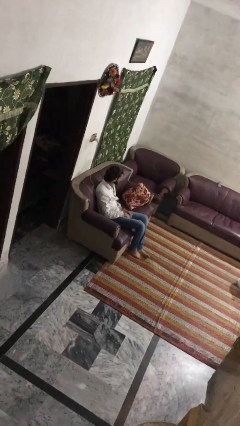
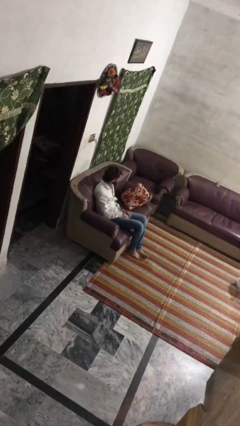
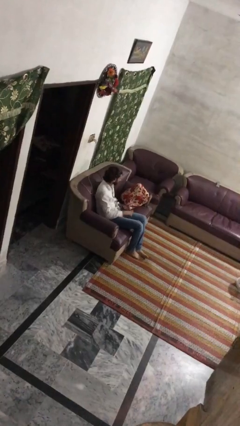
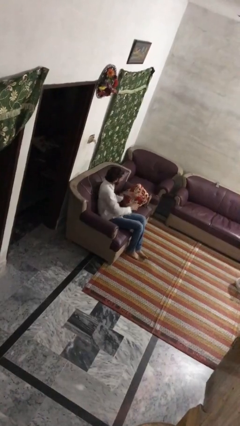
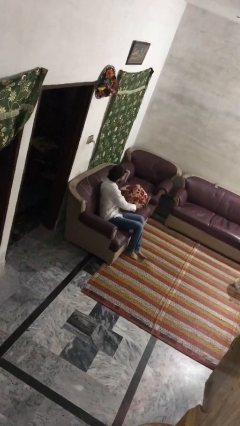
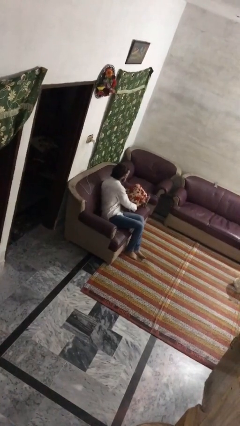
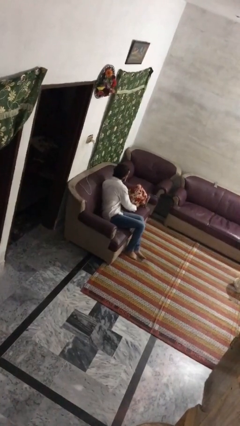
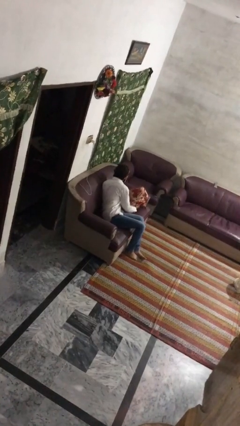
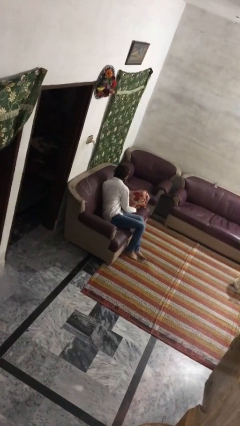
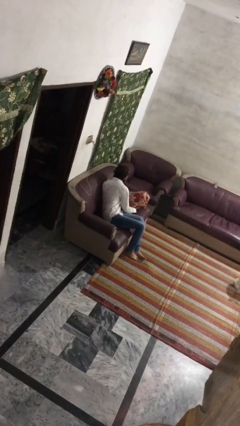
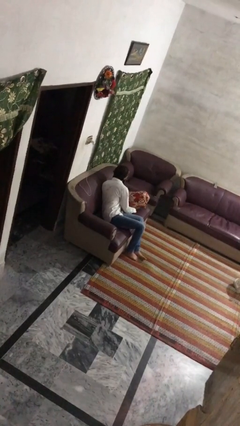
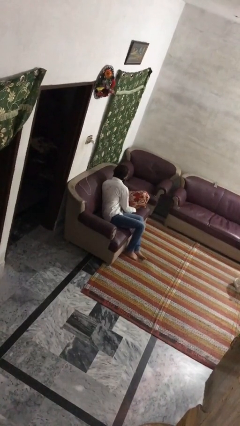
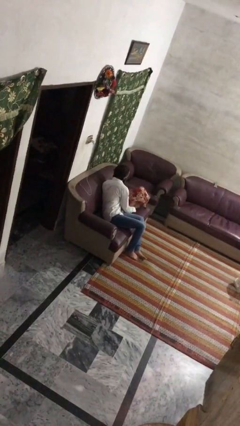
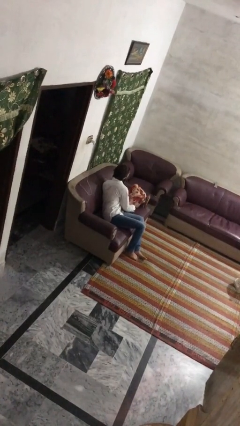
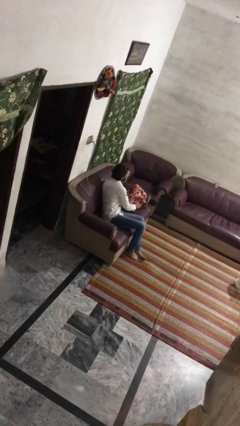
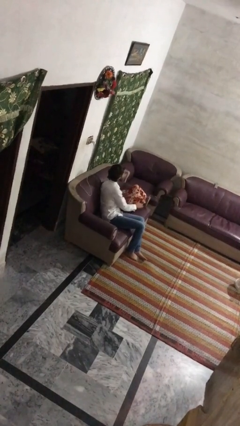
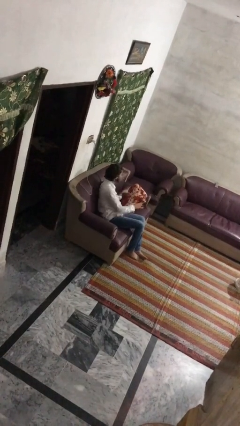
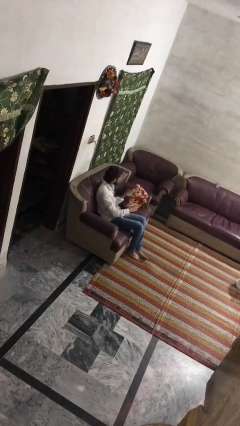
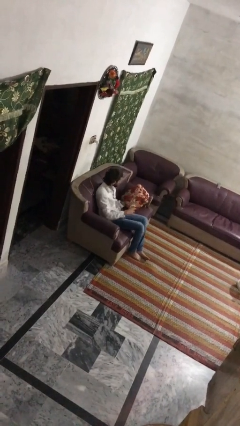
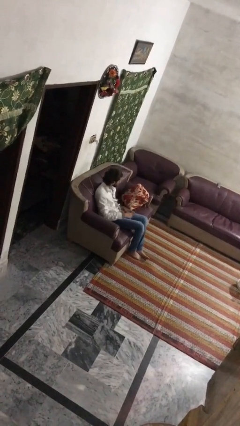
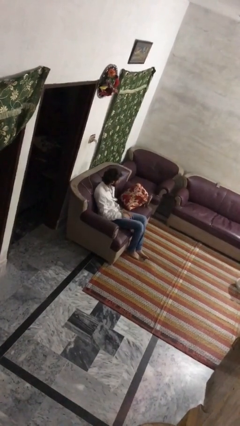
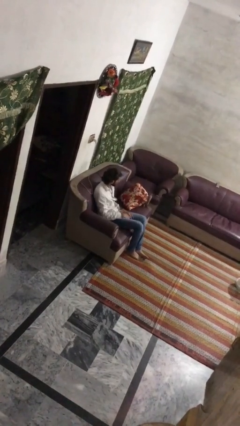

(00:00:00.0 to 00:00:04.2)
person searches in couch

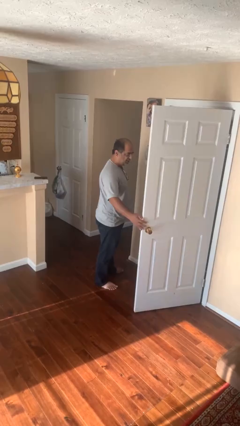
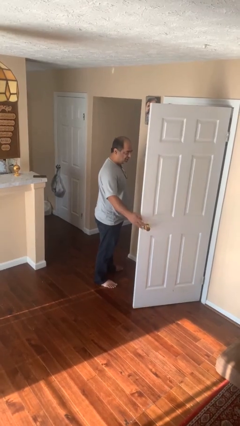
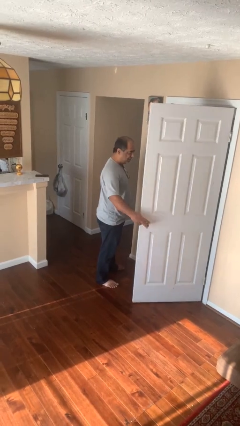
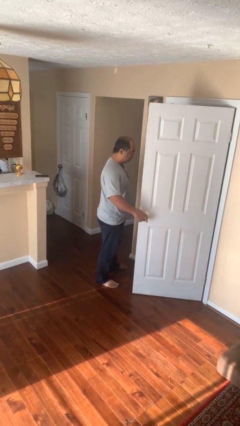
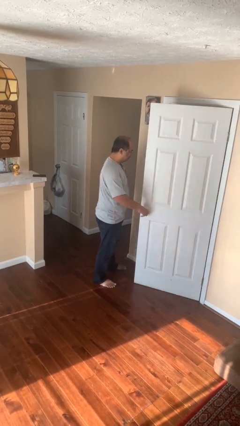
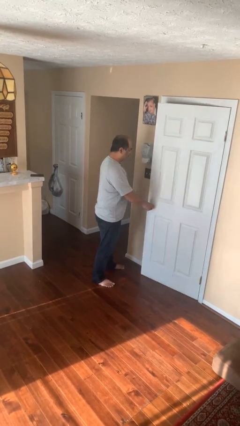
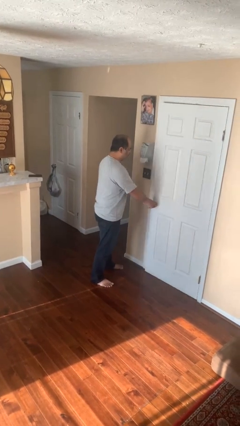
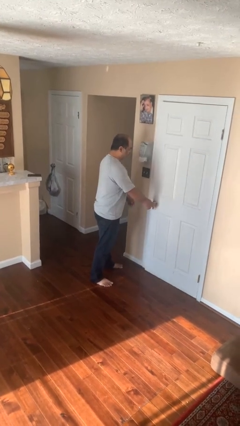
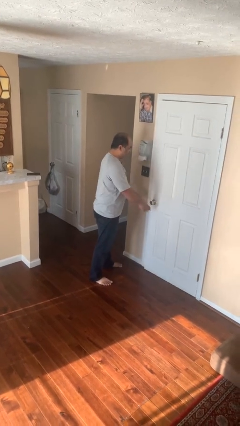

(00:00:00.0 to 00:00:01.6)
person closes facility door

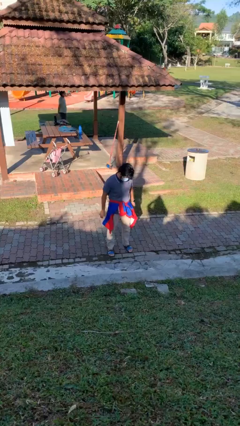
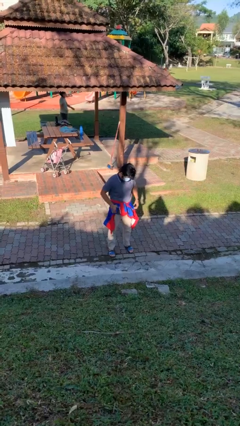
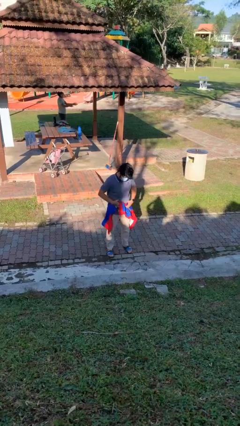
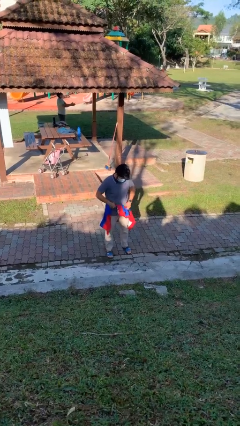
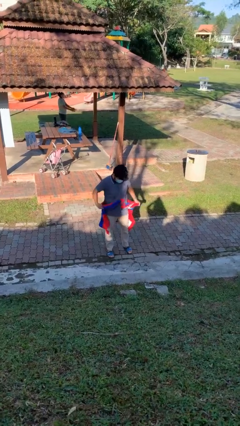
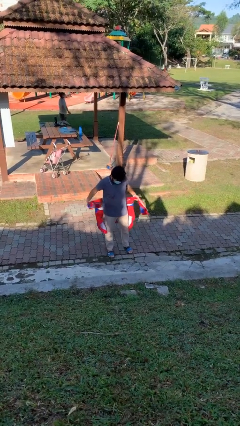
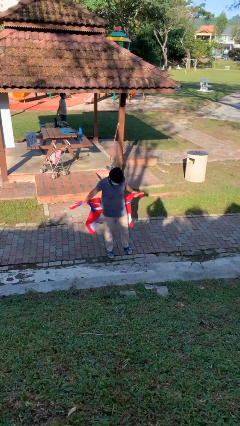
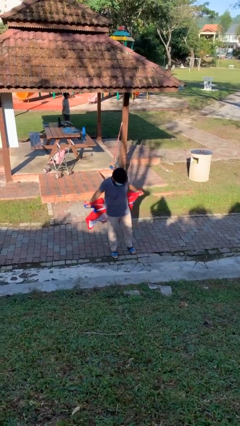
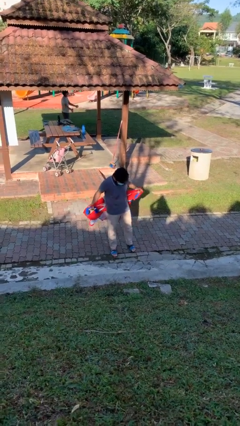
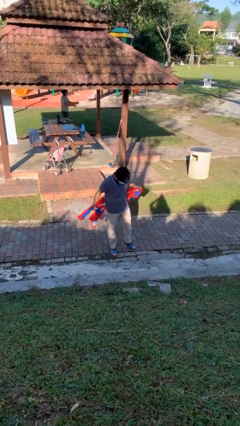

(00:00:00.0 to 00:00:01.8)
person unties jacket around waist

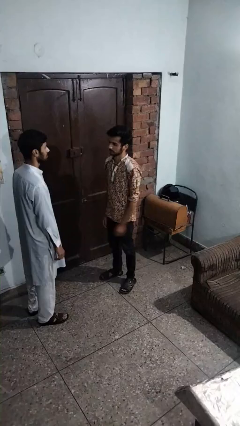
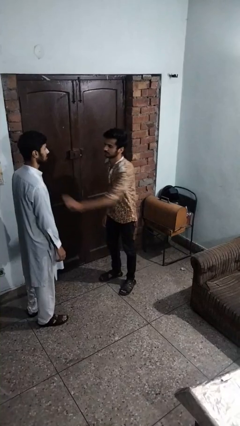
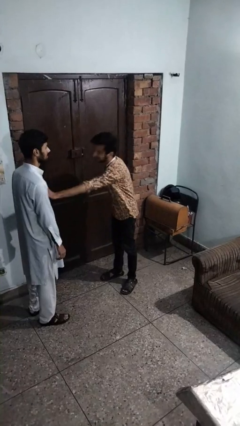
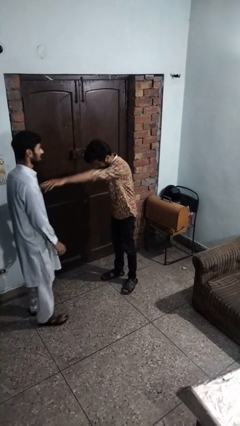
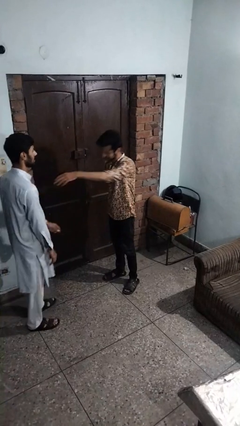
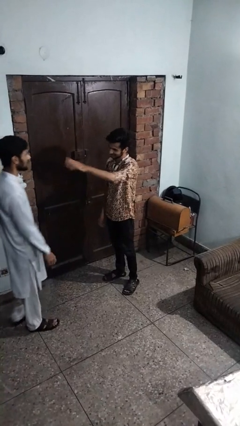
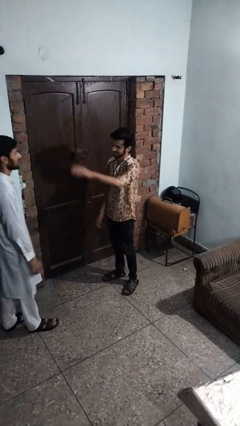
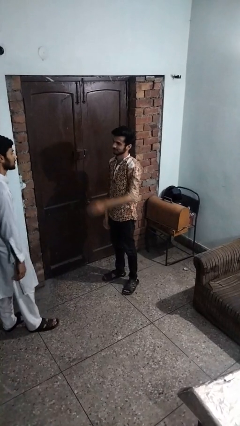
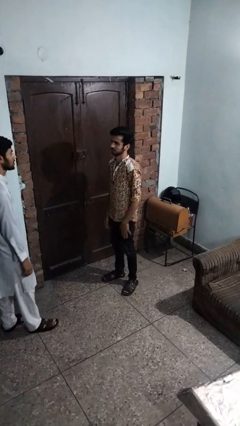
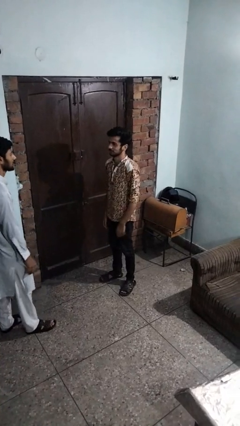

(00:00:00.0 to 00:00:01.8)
person shoves person

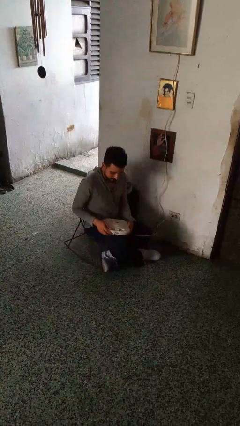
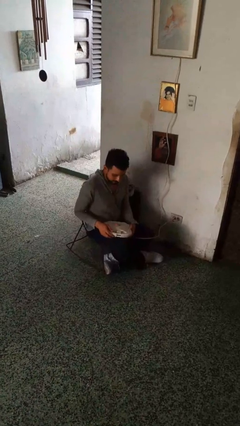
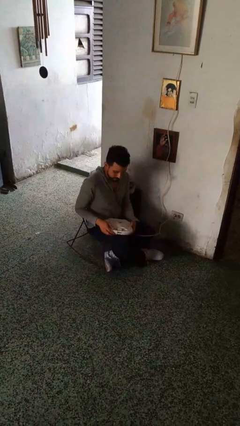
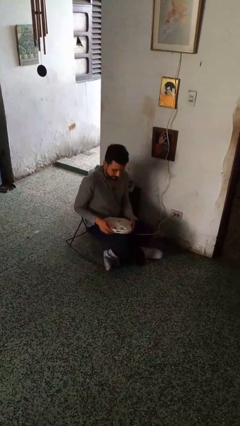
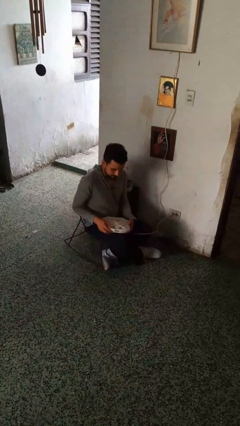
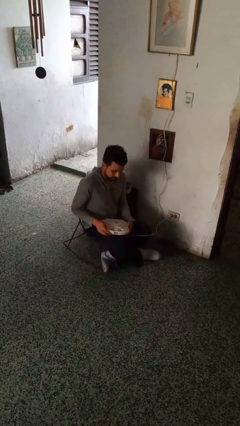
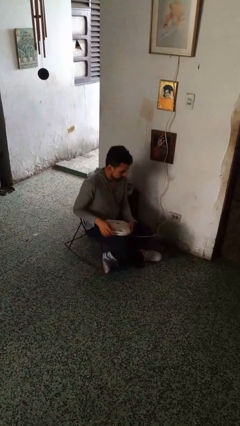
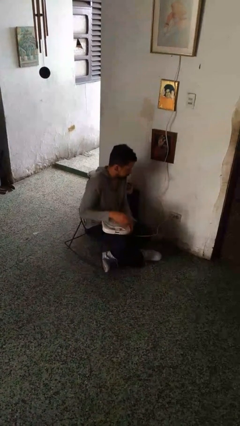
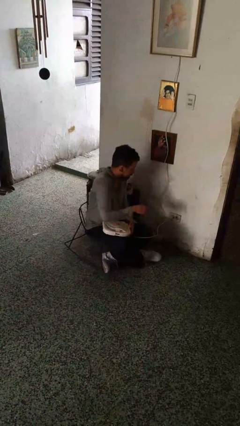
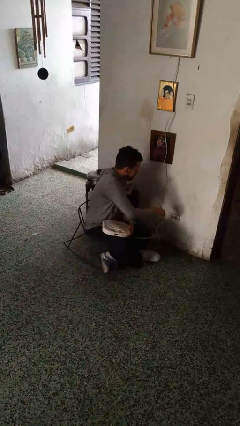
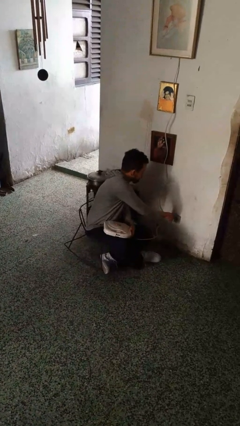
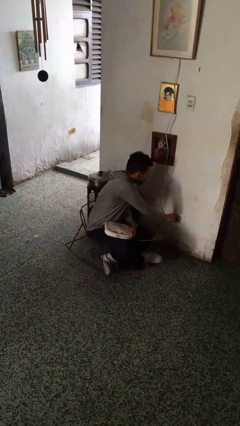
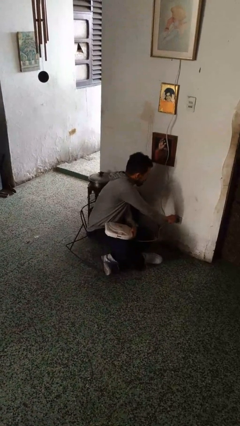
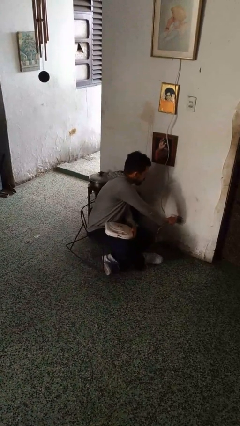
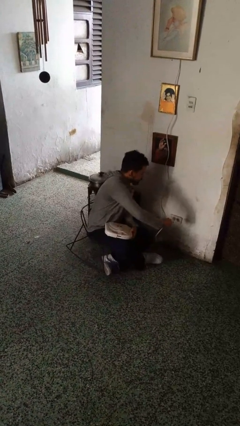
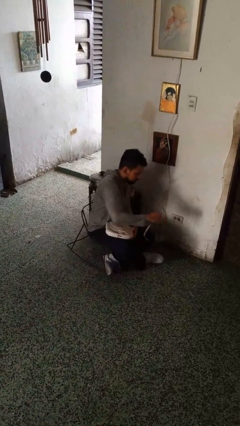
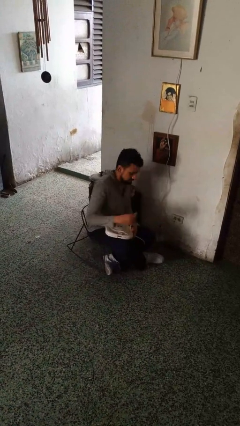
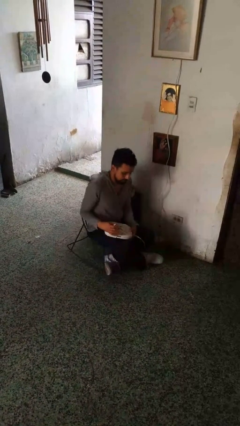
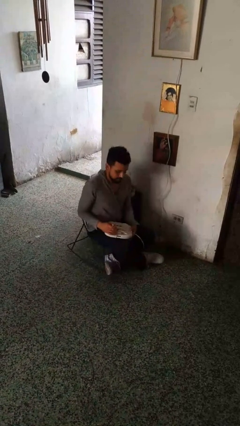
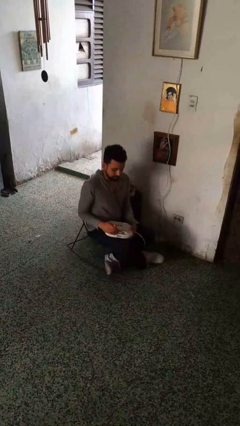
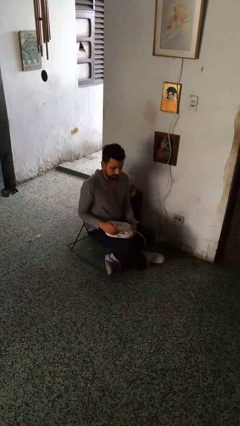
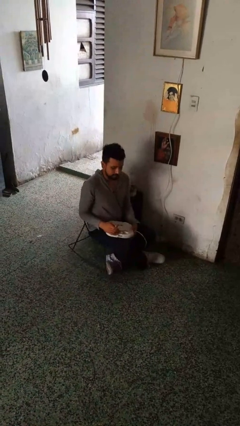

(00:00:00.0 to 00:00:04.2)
person unplugs from electrical socket

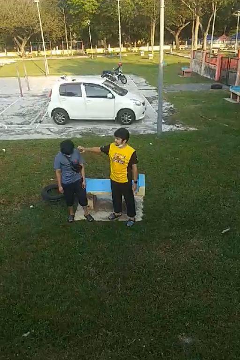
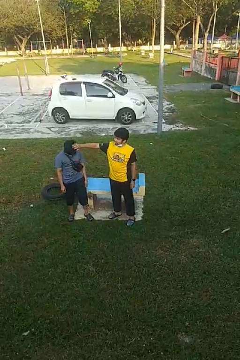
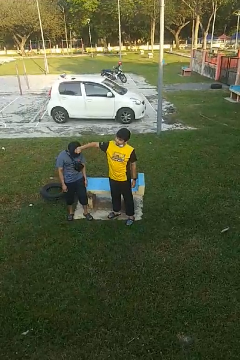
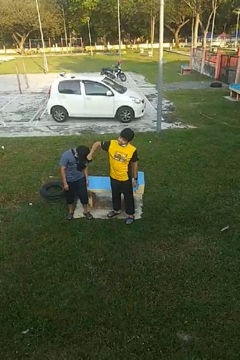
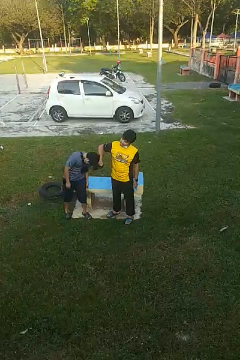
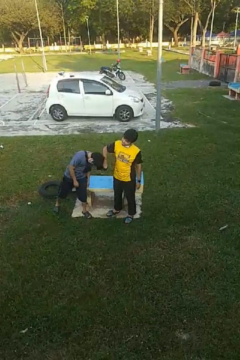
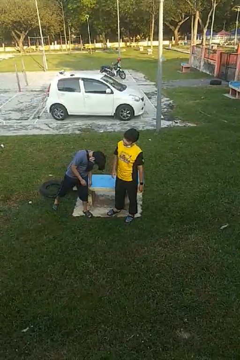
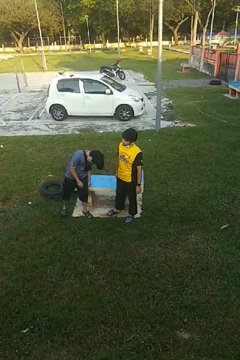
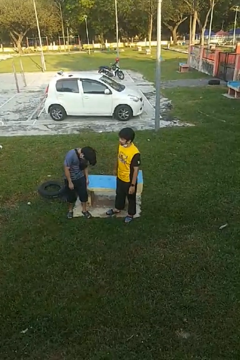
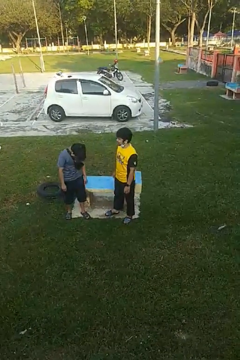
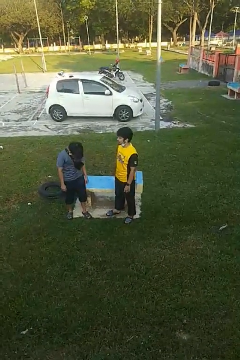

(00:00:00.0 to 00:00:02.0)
person grabs person by hair

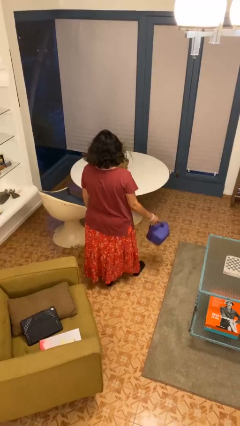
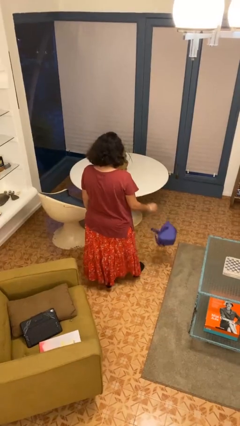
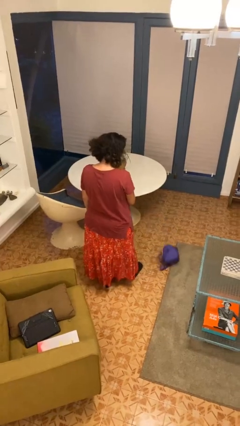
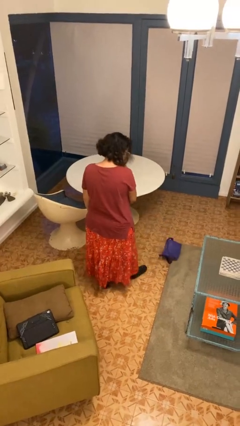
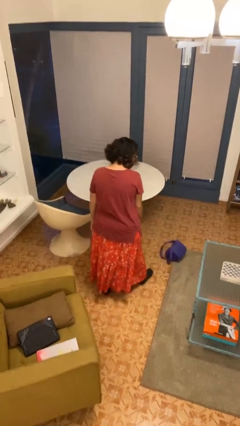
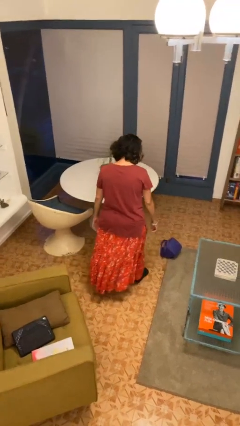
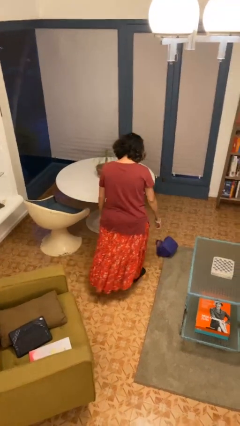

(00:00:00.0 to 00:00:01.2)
person drops object

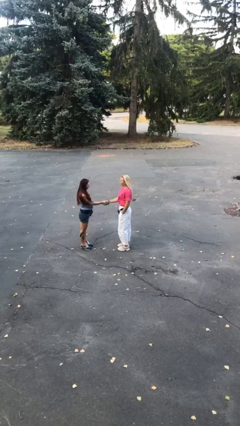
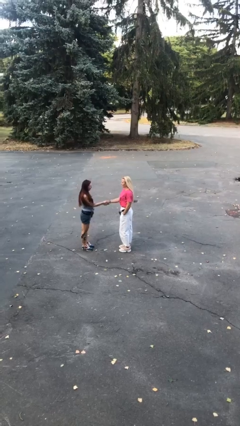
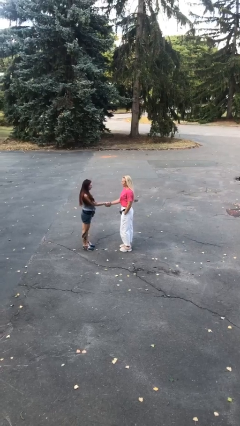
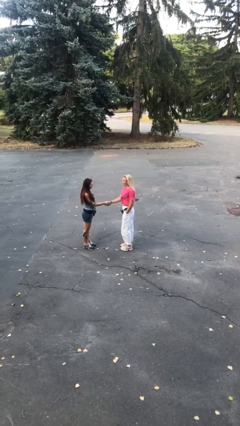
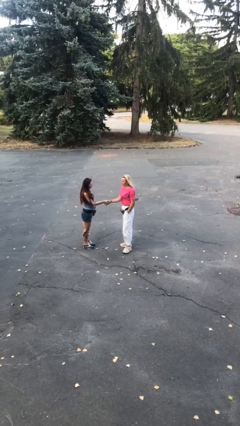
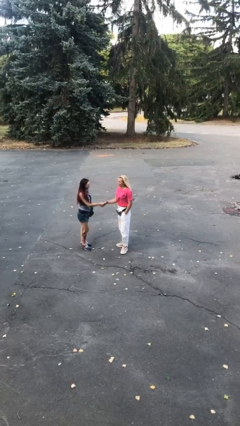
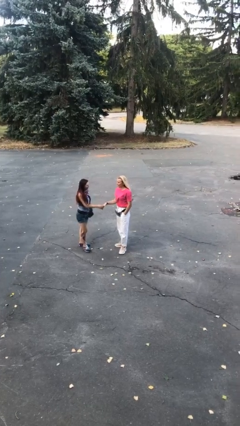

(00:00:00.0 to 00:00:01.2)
person shakes hand
